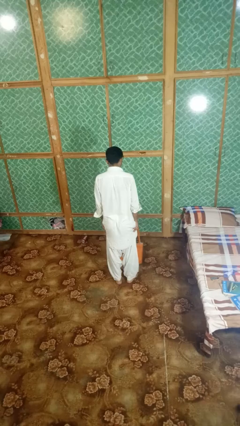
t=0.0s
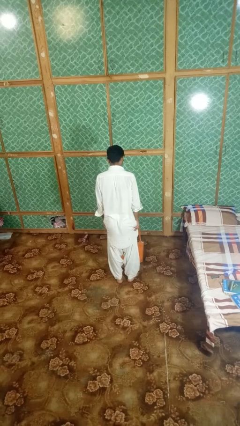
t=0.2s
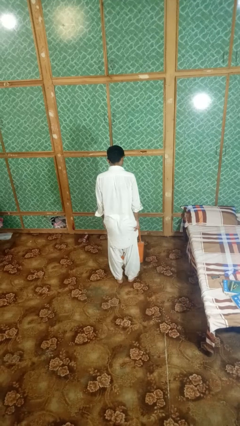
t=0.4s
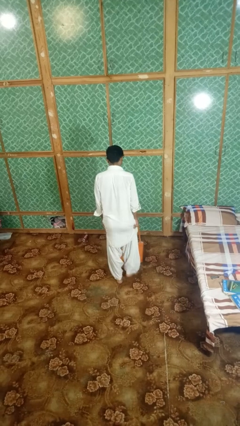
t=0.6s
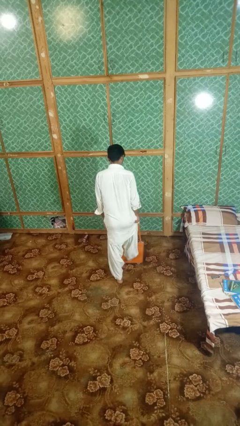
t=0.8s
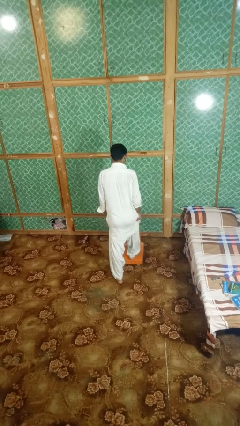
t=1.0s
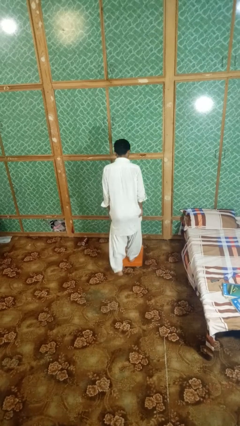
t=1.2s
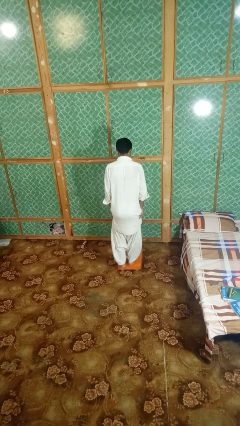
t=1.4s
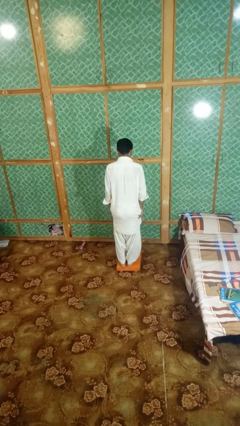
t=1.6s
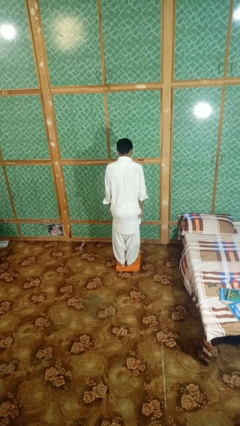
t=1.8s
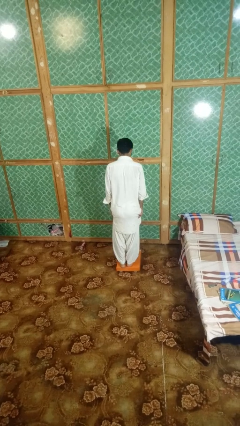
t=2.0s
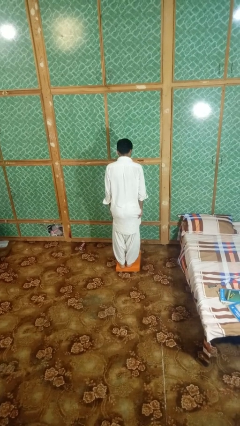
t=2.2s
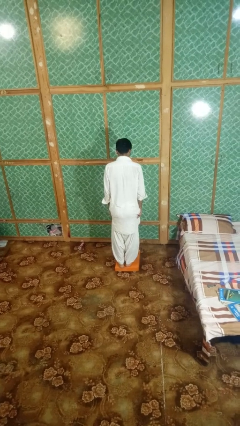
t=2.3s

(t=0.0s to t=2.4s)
person uses bodyweight scale

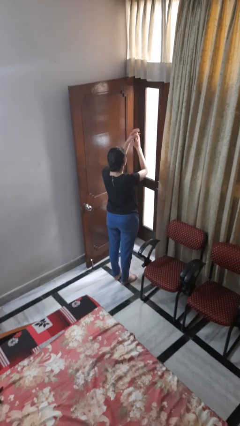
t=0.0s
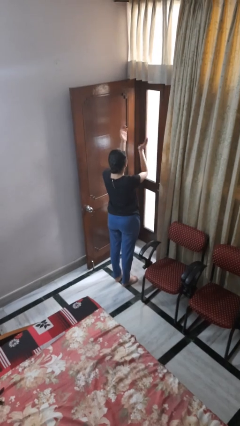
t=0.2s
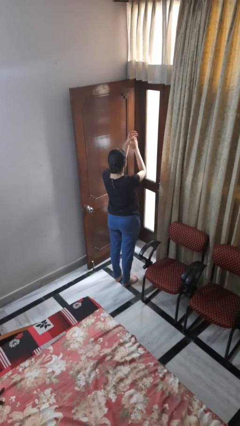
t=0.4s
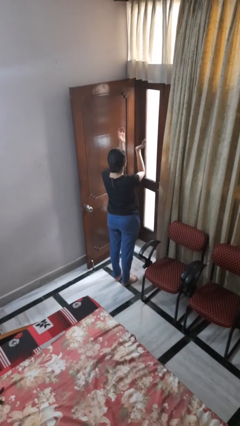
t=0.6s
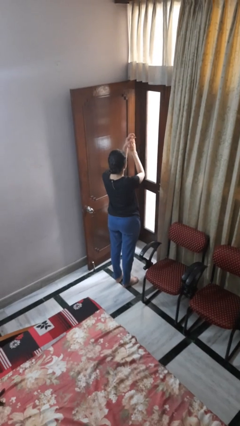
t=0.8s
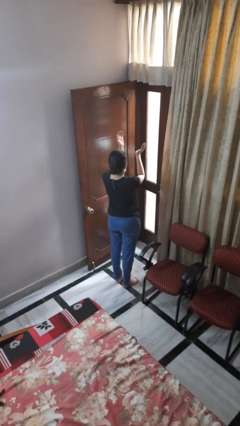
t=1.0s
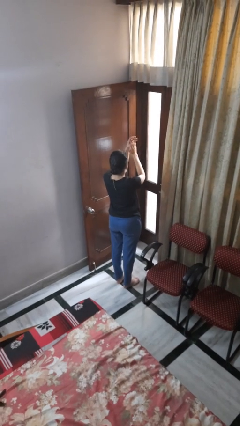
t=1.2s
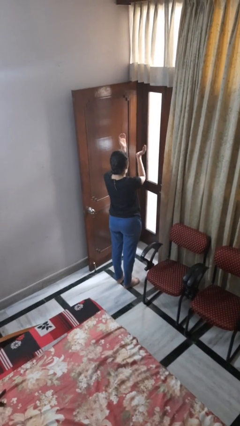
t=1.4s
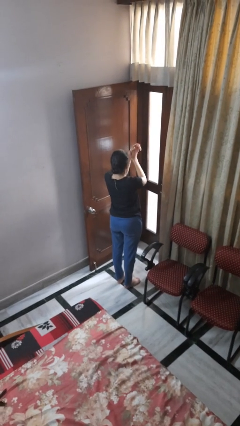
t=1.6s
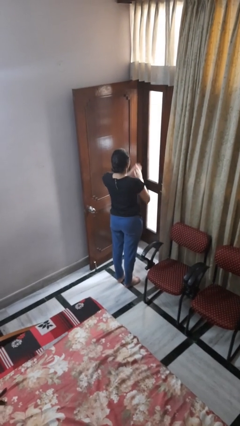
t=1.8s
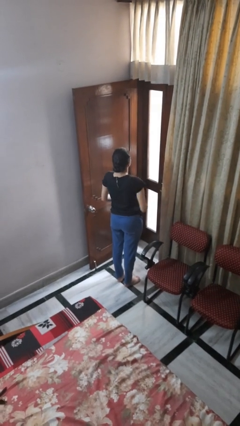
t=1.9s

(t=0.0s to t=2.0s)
person claps hands

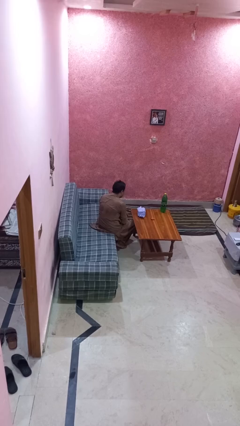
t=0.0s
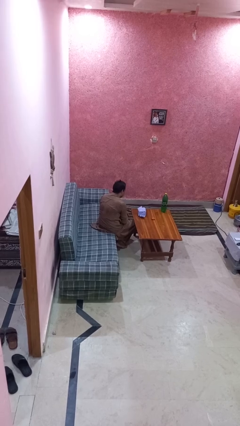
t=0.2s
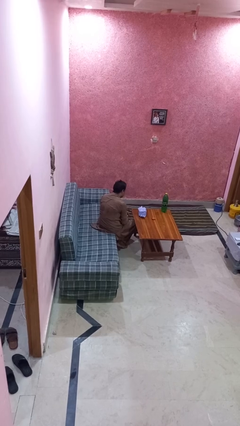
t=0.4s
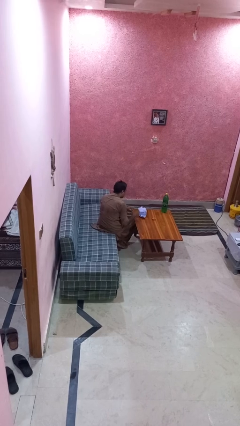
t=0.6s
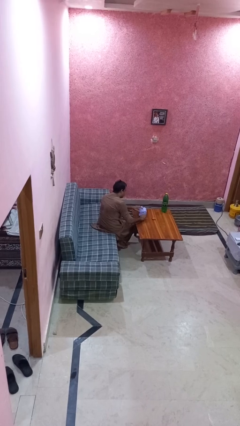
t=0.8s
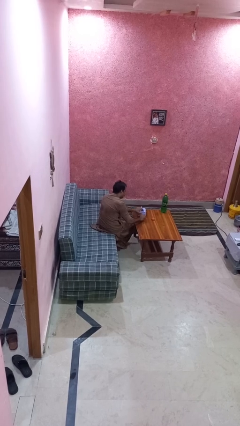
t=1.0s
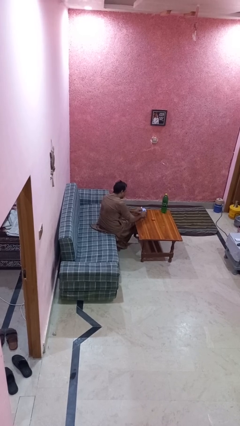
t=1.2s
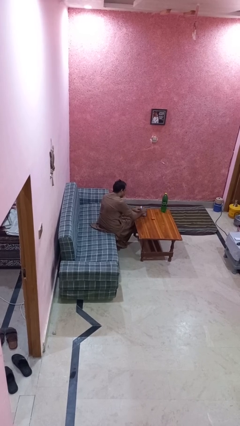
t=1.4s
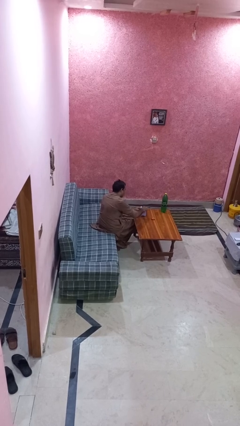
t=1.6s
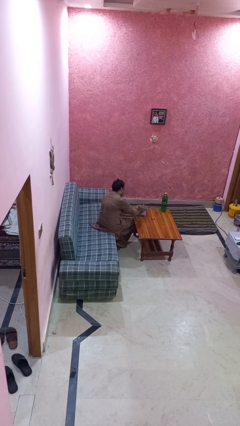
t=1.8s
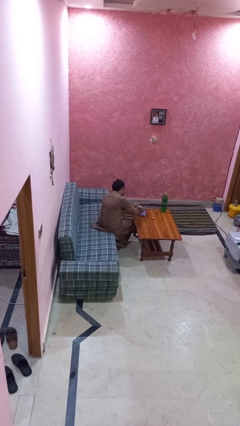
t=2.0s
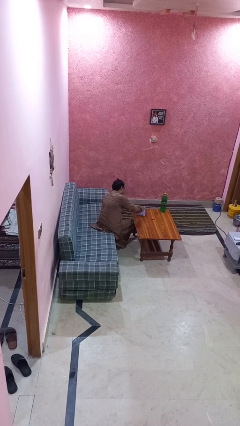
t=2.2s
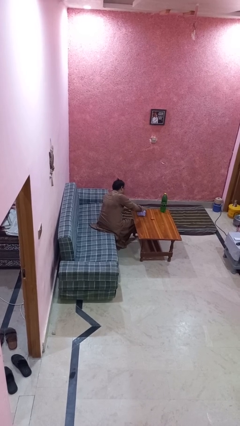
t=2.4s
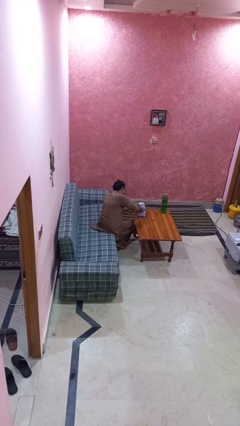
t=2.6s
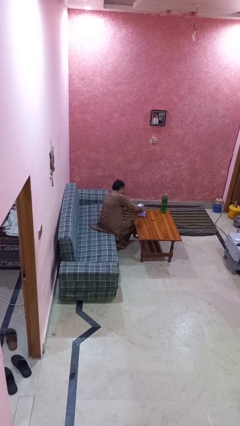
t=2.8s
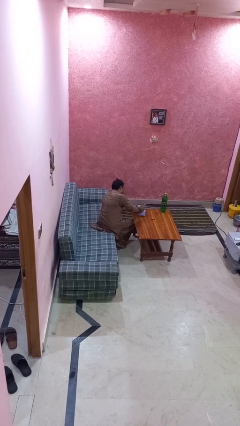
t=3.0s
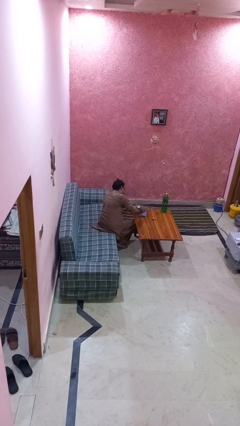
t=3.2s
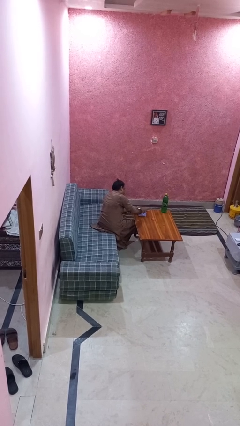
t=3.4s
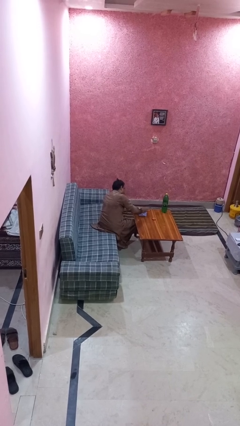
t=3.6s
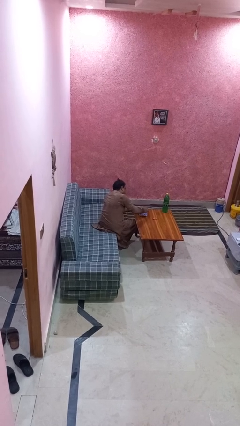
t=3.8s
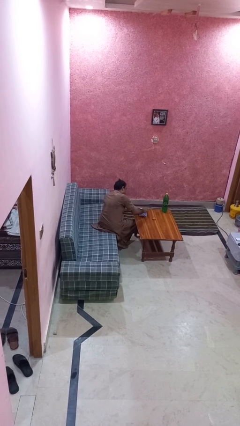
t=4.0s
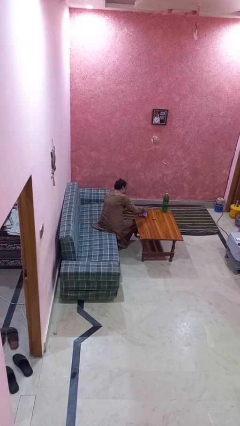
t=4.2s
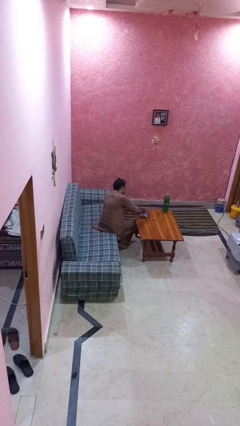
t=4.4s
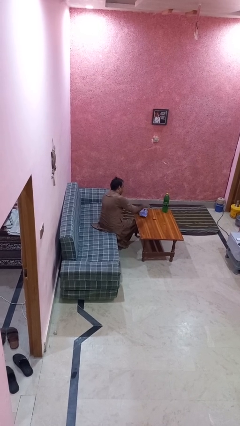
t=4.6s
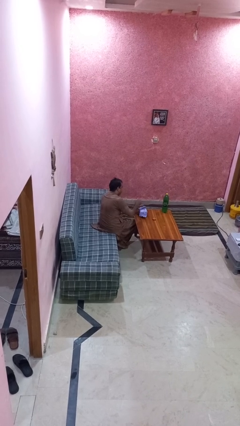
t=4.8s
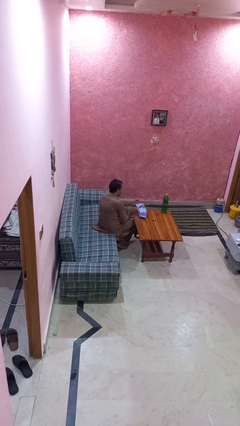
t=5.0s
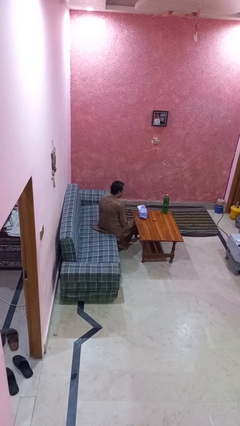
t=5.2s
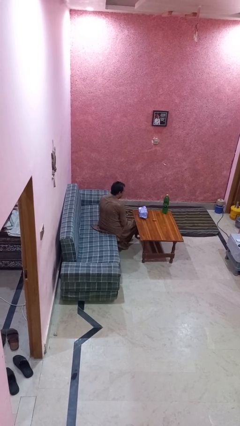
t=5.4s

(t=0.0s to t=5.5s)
person wraps box

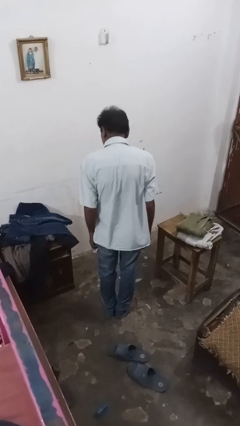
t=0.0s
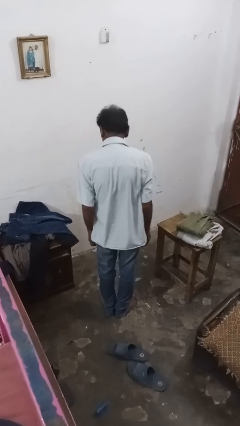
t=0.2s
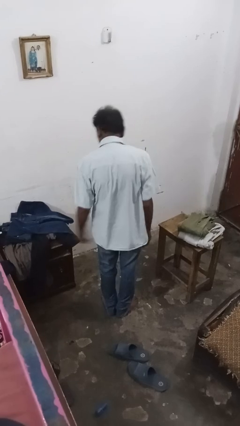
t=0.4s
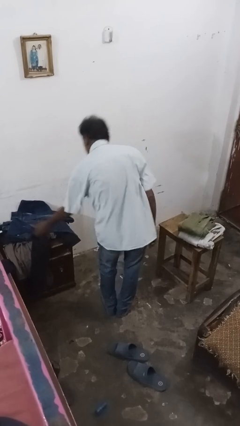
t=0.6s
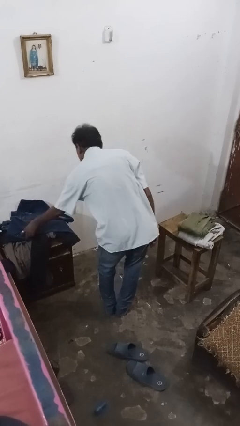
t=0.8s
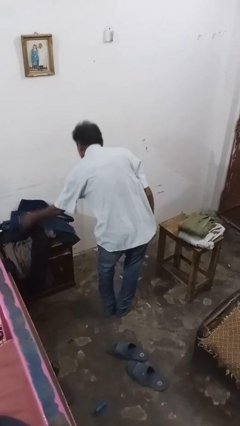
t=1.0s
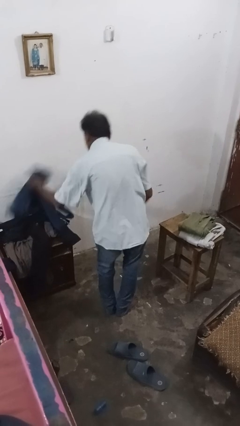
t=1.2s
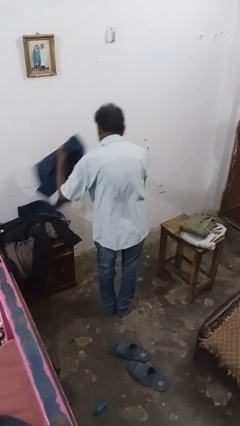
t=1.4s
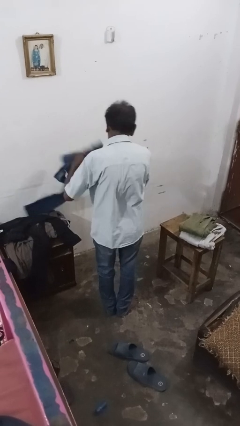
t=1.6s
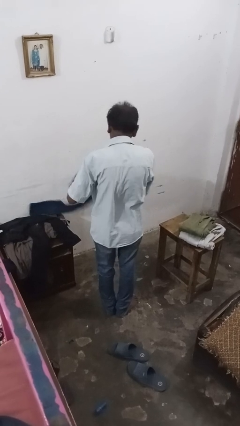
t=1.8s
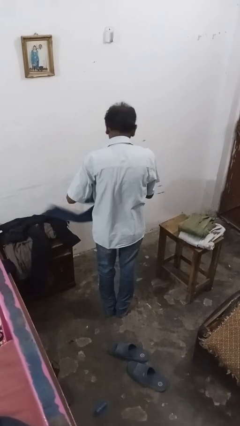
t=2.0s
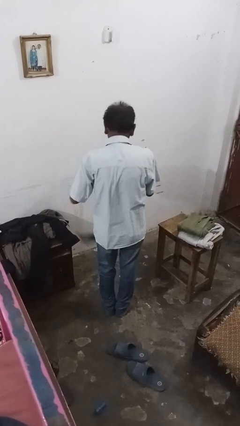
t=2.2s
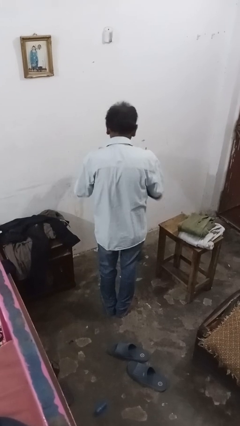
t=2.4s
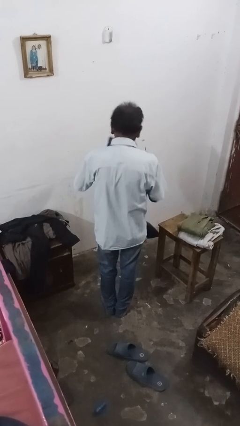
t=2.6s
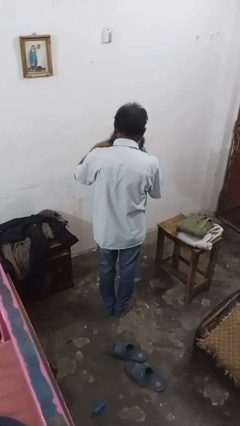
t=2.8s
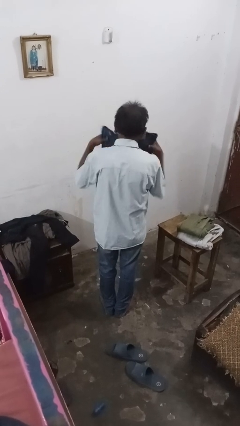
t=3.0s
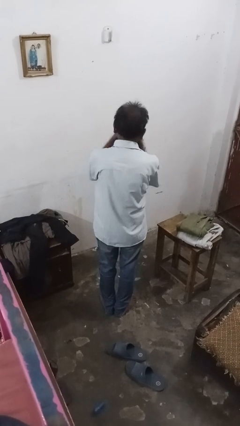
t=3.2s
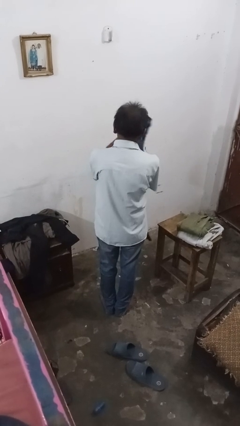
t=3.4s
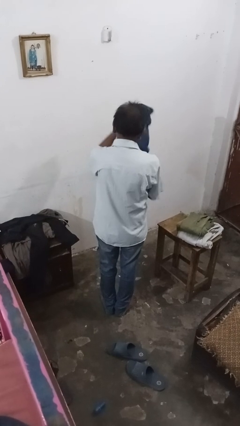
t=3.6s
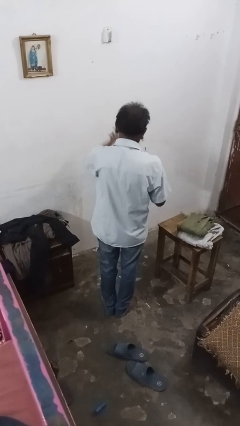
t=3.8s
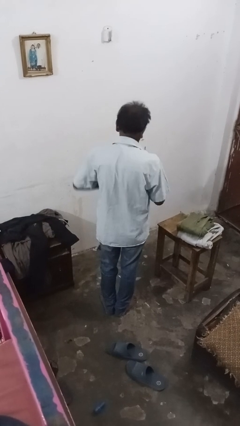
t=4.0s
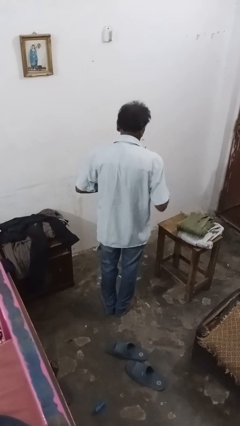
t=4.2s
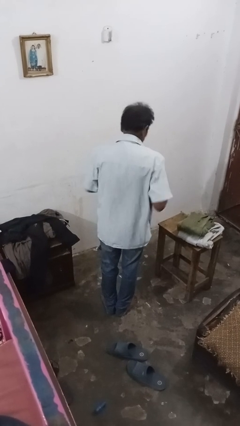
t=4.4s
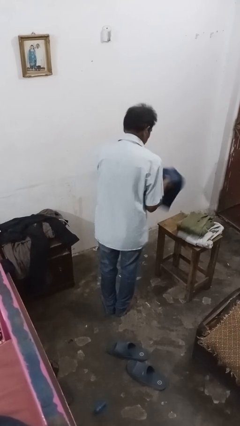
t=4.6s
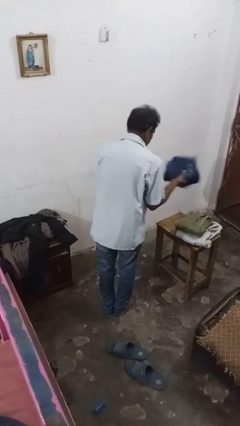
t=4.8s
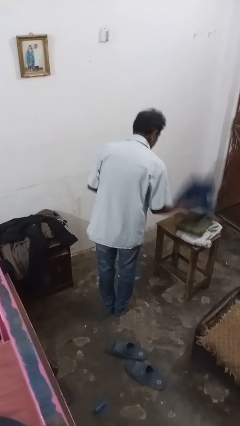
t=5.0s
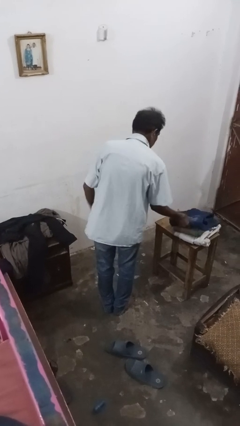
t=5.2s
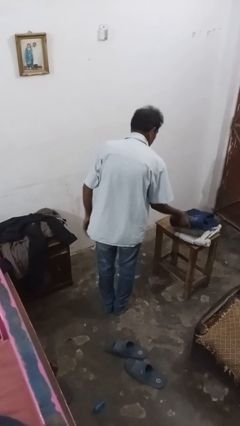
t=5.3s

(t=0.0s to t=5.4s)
person folds pants

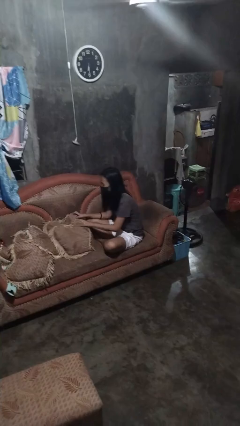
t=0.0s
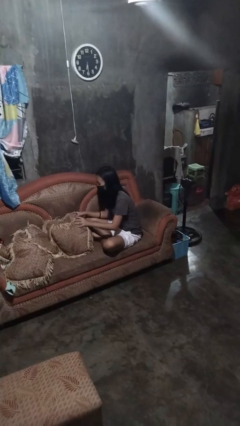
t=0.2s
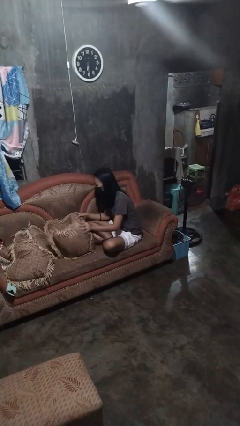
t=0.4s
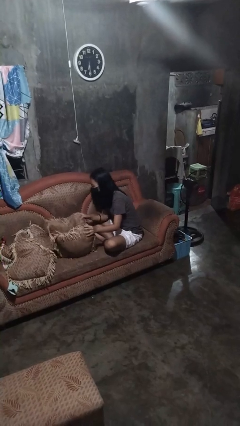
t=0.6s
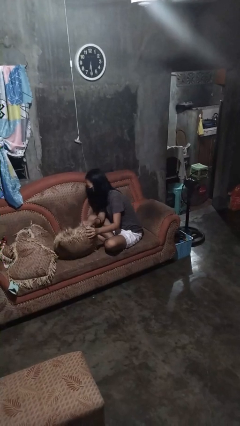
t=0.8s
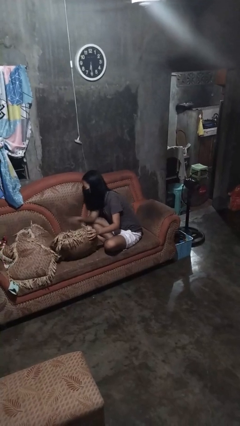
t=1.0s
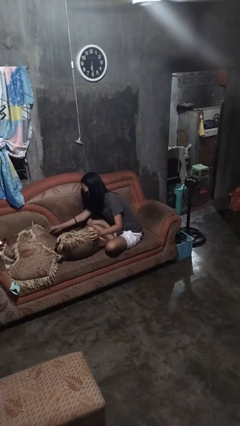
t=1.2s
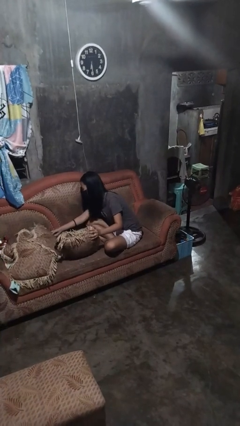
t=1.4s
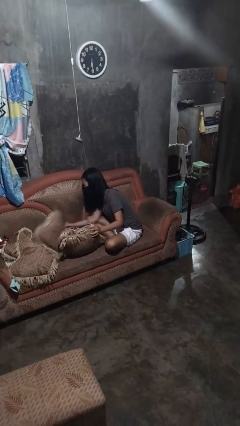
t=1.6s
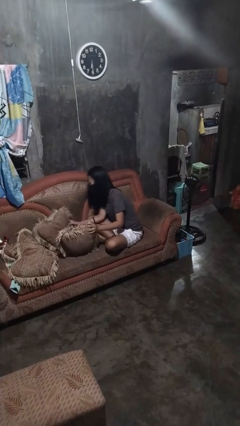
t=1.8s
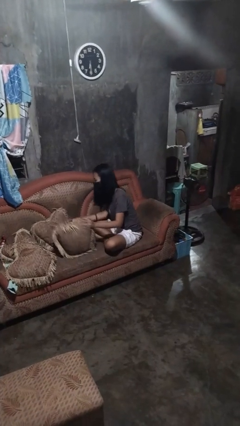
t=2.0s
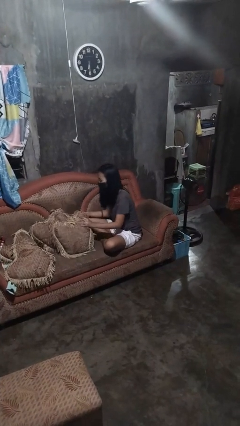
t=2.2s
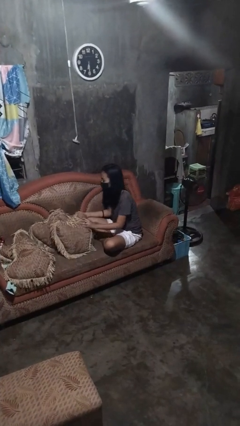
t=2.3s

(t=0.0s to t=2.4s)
person searches in couch
